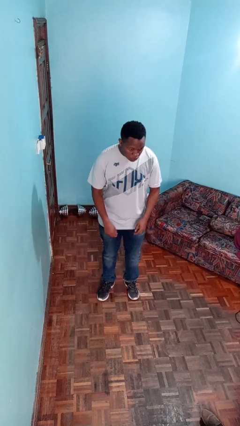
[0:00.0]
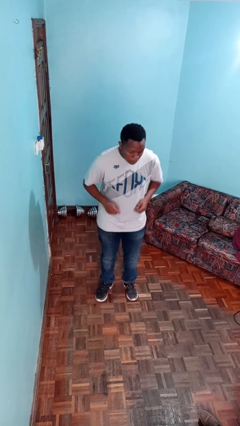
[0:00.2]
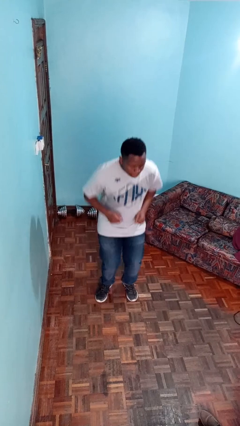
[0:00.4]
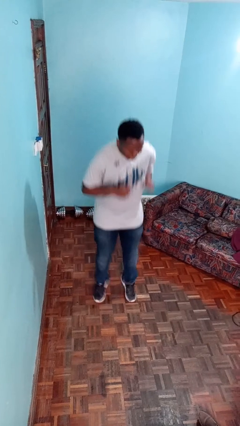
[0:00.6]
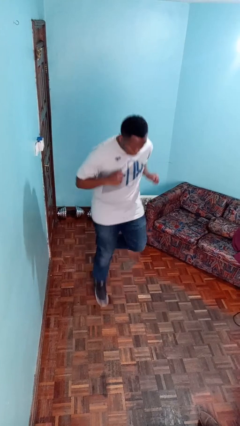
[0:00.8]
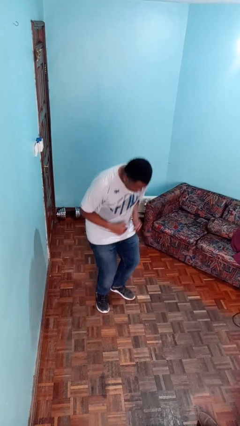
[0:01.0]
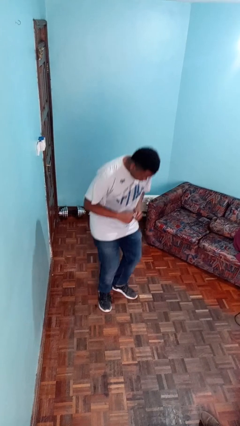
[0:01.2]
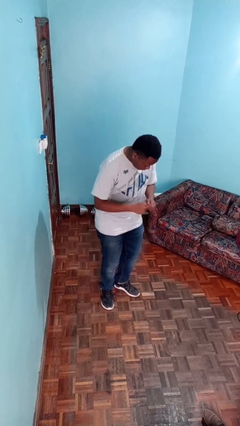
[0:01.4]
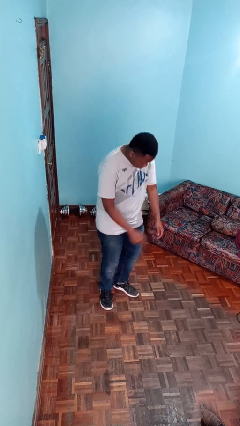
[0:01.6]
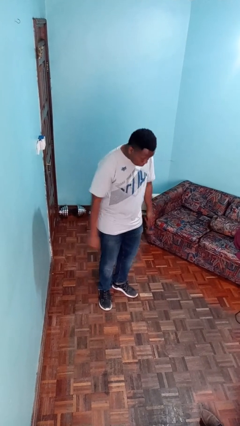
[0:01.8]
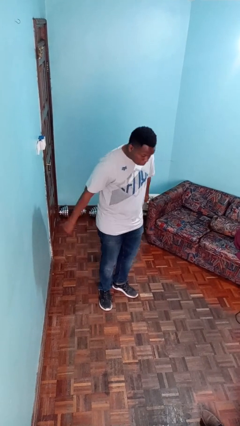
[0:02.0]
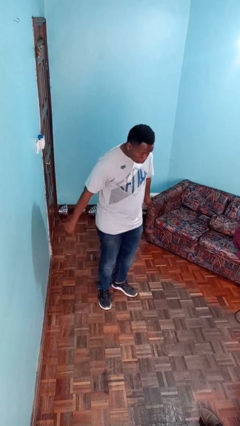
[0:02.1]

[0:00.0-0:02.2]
person jumps

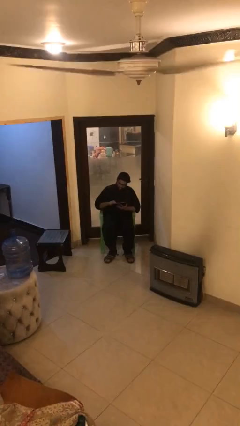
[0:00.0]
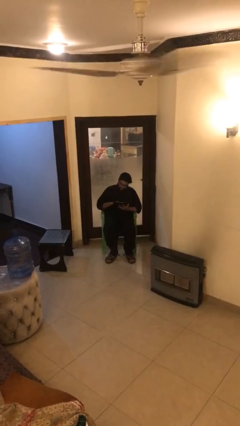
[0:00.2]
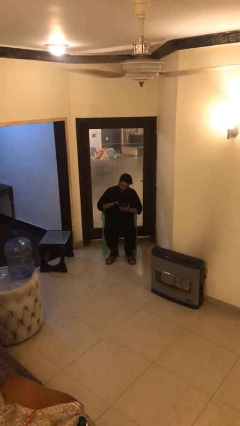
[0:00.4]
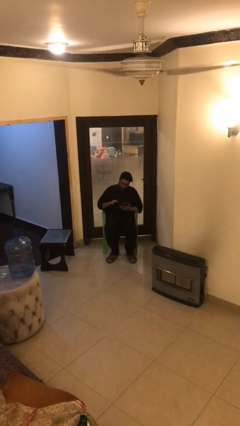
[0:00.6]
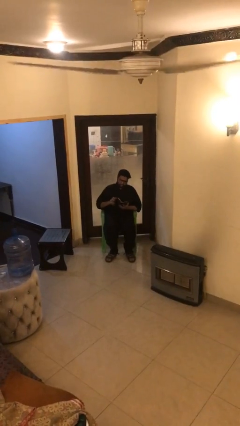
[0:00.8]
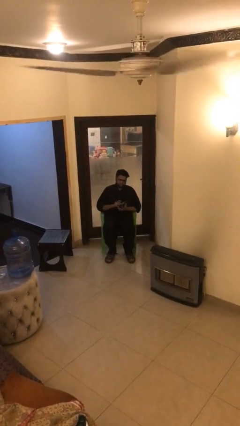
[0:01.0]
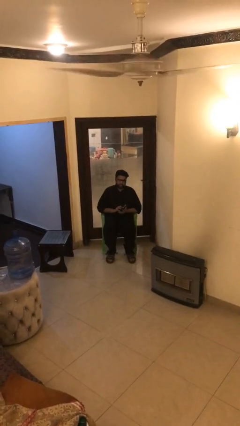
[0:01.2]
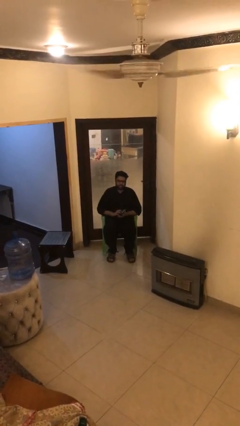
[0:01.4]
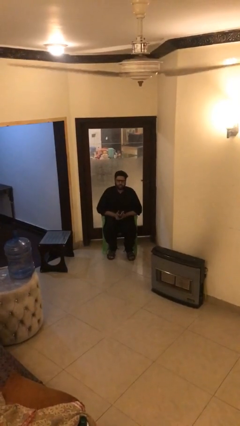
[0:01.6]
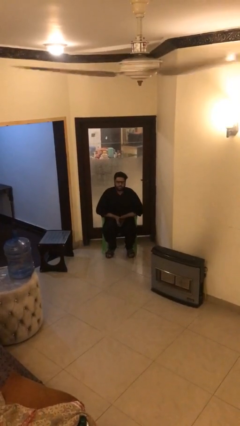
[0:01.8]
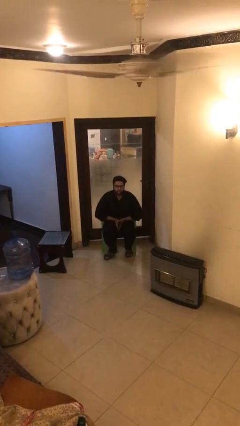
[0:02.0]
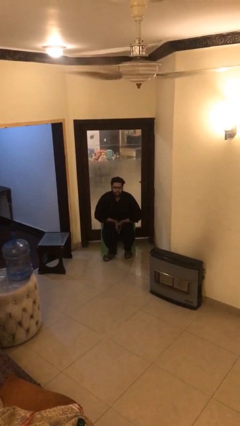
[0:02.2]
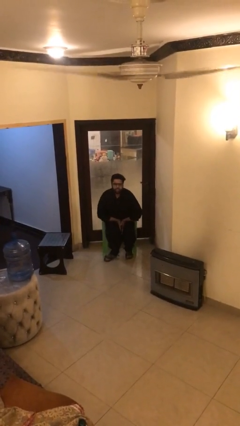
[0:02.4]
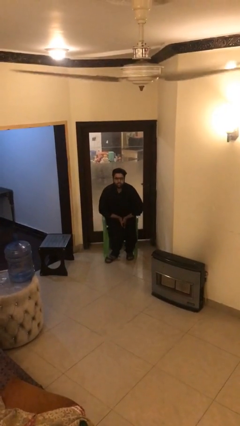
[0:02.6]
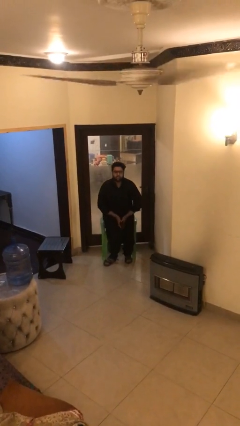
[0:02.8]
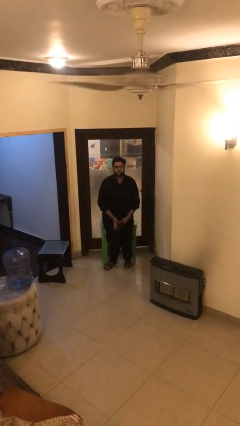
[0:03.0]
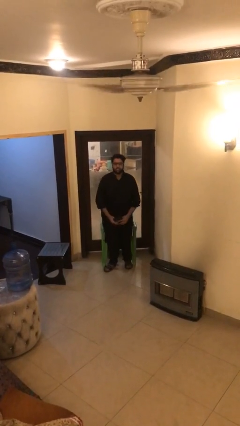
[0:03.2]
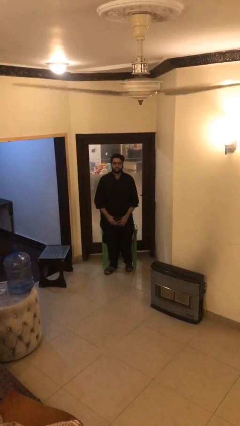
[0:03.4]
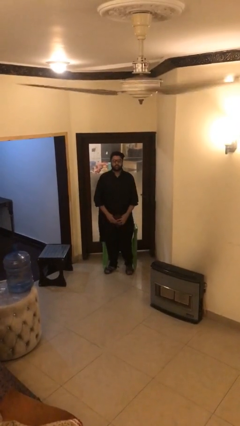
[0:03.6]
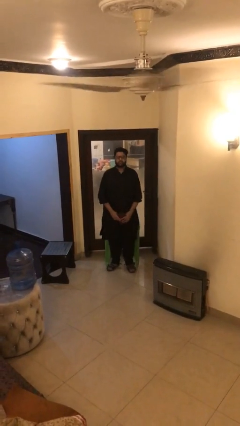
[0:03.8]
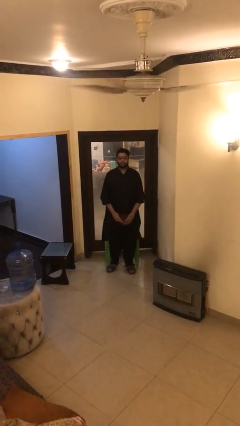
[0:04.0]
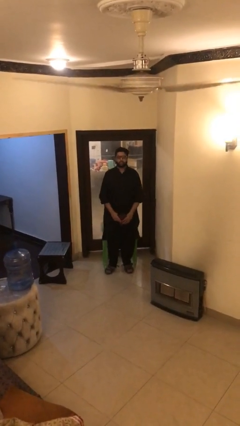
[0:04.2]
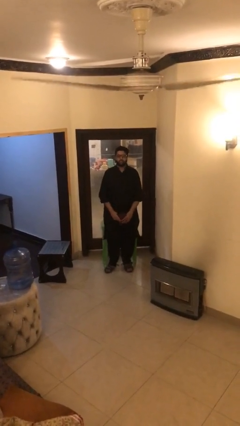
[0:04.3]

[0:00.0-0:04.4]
person stands up

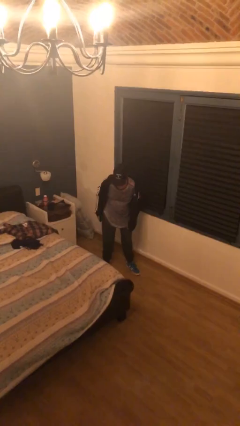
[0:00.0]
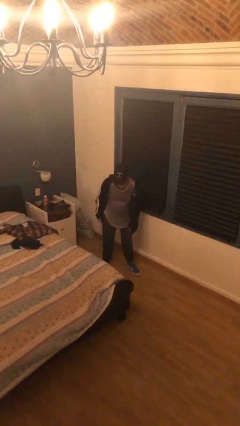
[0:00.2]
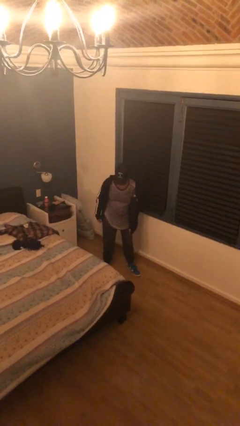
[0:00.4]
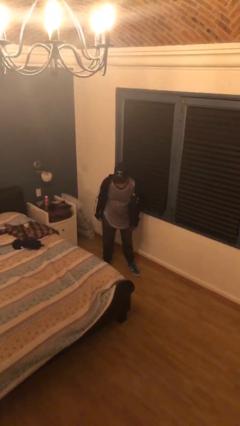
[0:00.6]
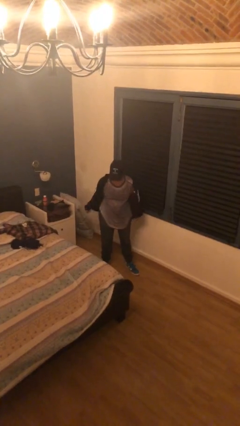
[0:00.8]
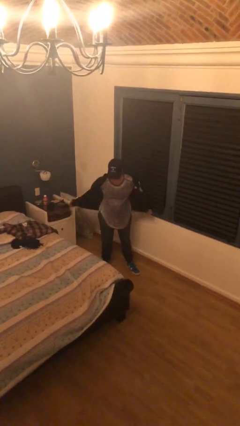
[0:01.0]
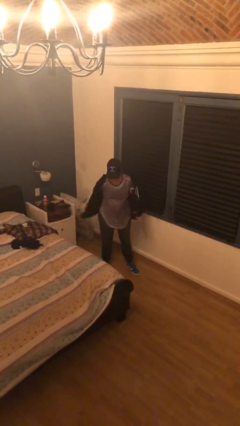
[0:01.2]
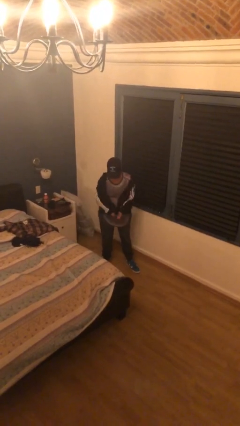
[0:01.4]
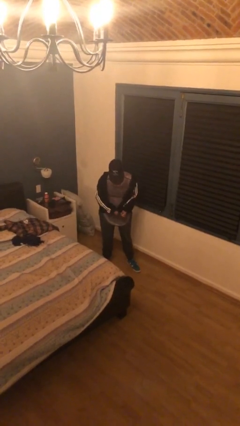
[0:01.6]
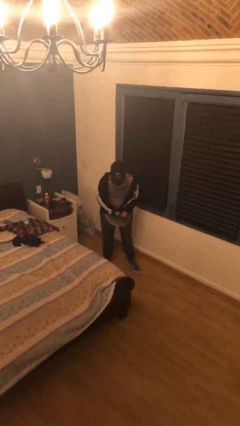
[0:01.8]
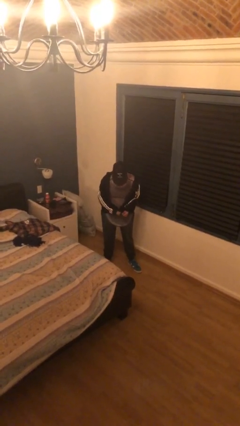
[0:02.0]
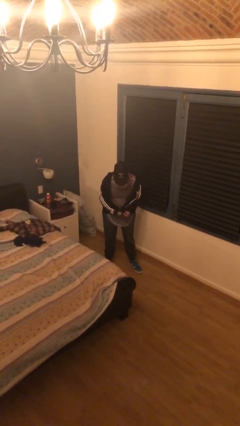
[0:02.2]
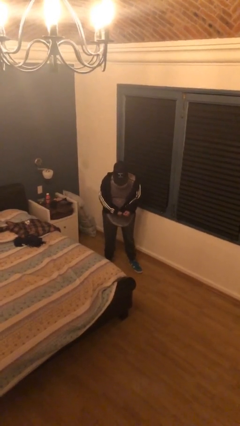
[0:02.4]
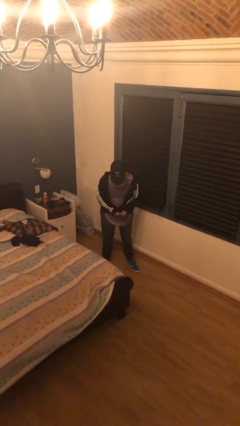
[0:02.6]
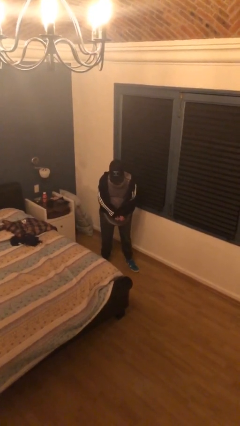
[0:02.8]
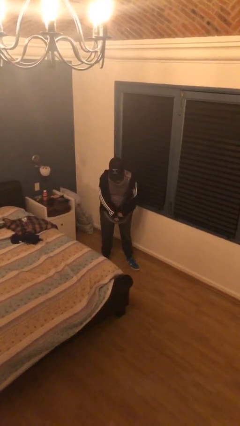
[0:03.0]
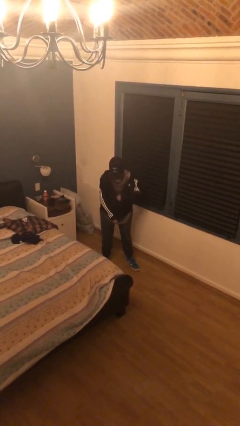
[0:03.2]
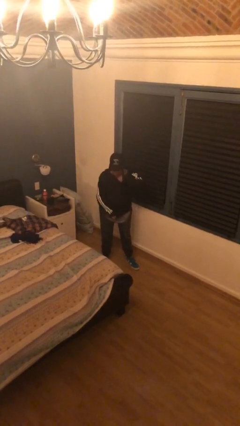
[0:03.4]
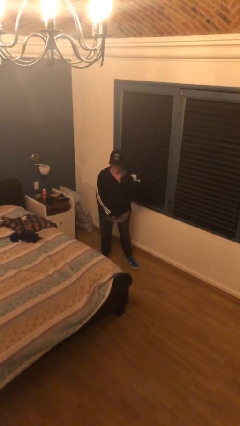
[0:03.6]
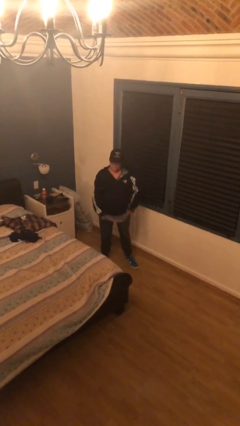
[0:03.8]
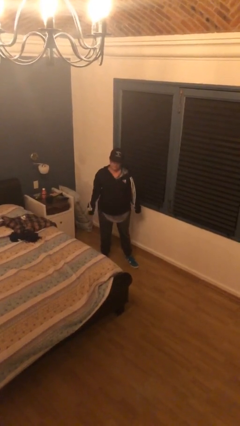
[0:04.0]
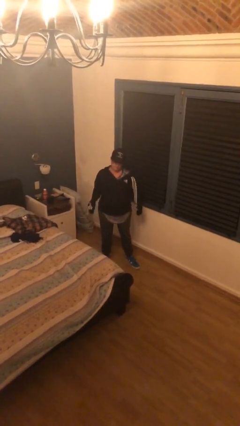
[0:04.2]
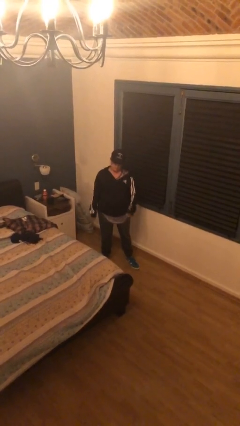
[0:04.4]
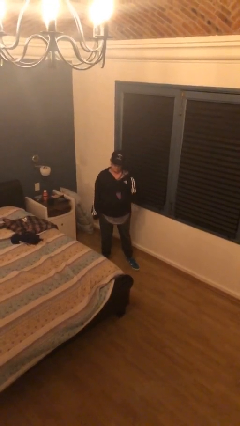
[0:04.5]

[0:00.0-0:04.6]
person zips up jacket

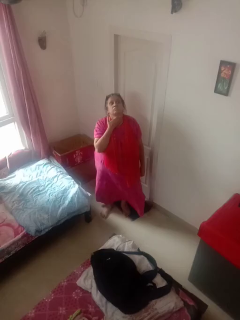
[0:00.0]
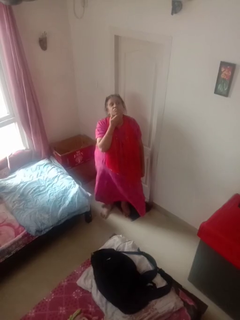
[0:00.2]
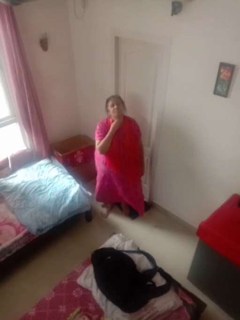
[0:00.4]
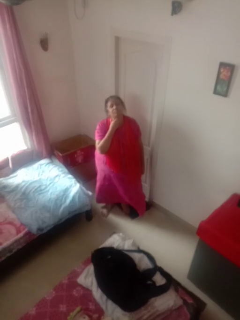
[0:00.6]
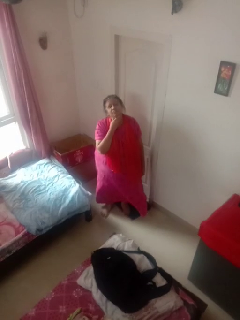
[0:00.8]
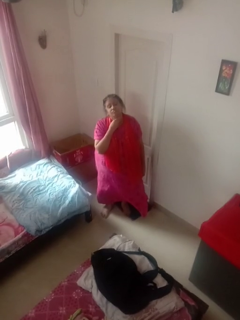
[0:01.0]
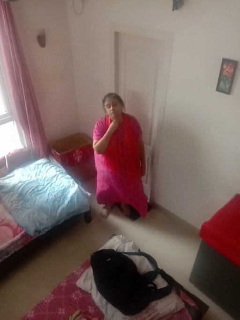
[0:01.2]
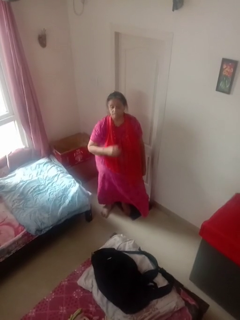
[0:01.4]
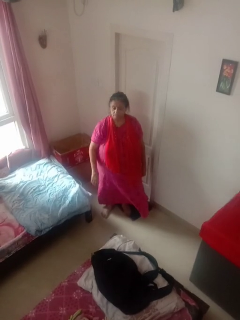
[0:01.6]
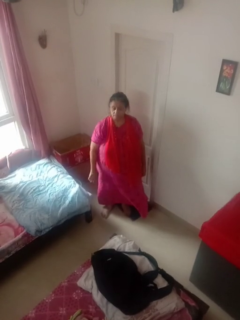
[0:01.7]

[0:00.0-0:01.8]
person rubs neck

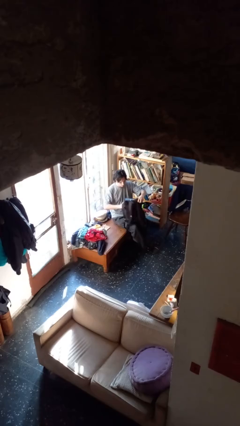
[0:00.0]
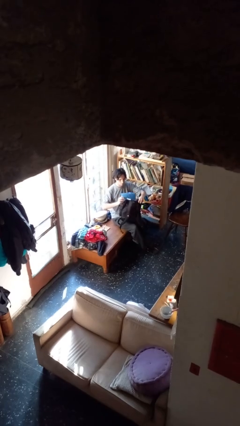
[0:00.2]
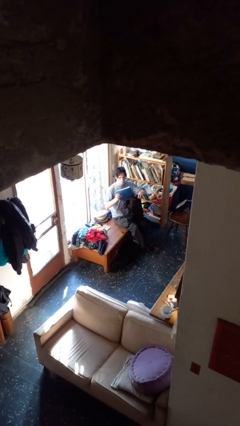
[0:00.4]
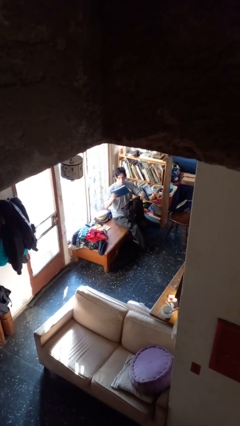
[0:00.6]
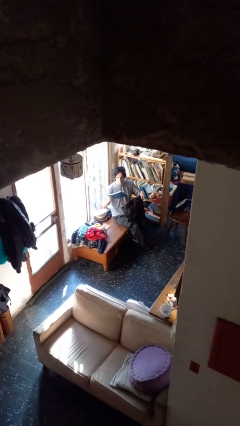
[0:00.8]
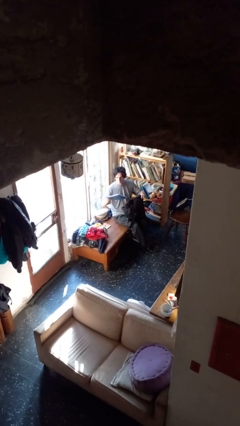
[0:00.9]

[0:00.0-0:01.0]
person takes object from backpack

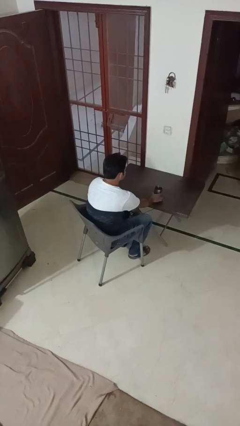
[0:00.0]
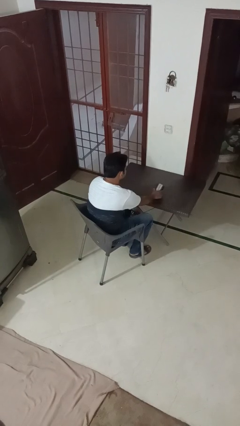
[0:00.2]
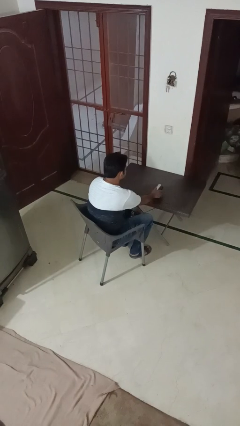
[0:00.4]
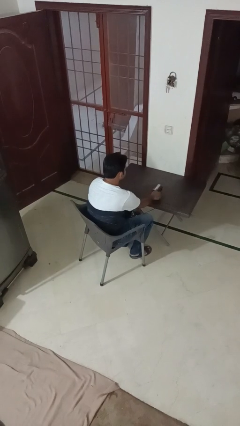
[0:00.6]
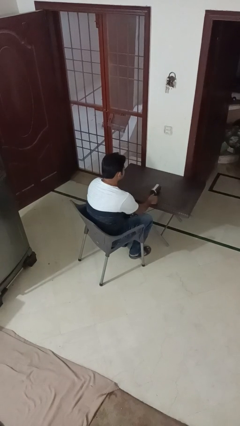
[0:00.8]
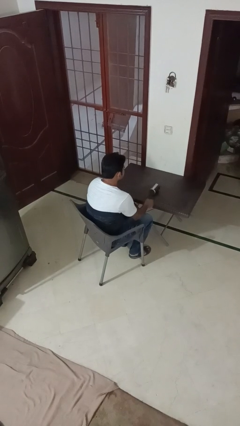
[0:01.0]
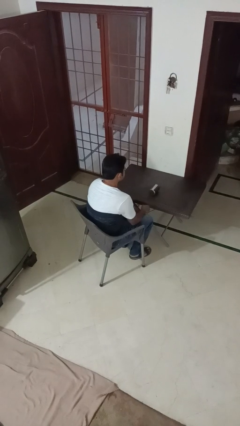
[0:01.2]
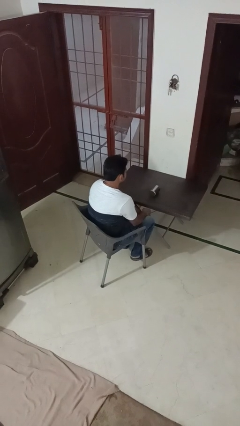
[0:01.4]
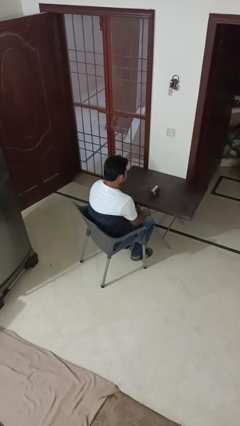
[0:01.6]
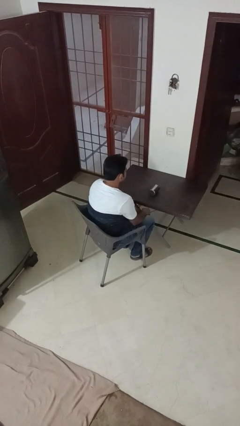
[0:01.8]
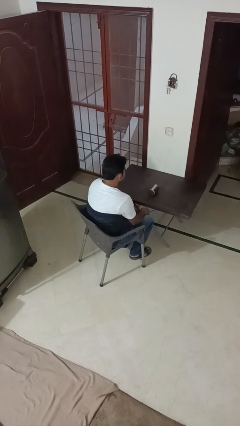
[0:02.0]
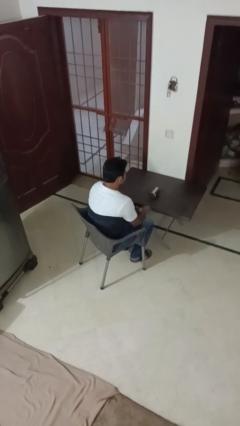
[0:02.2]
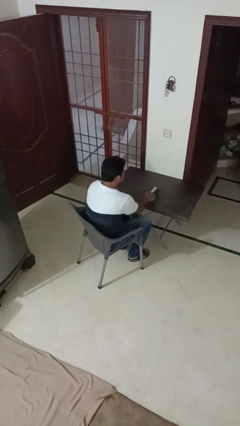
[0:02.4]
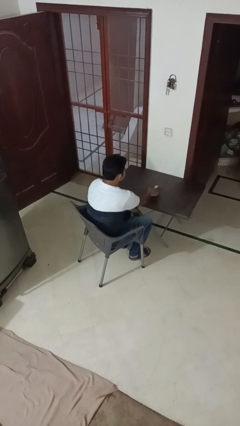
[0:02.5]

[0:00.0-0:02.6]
person knocks over glass

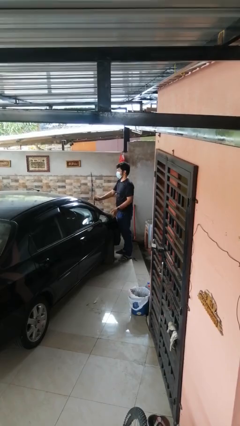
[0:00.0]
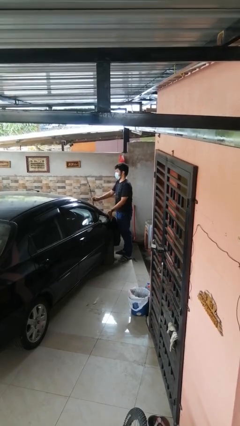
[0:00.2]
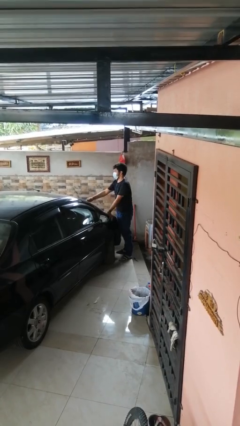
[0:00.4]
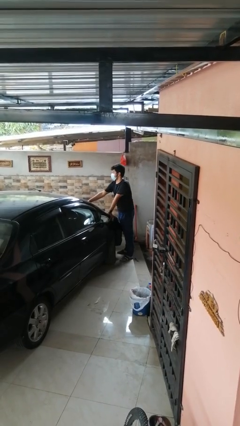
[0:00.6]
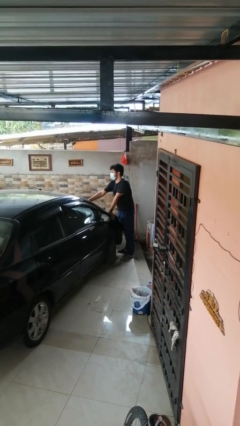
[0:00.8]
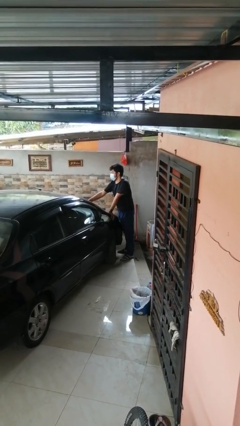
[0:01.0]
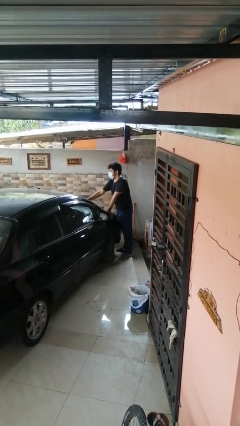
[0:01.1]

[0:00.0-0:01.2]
person flips down car wipers
